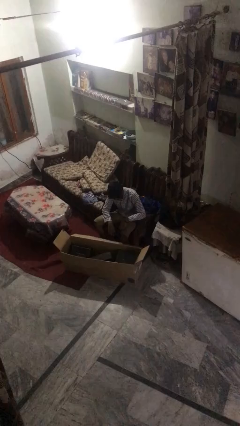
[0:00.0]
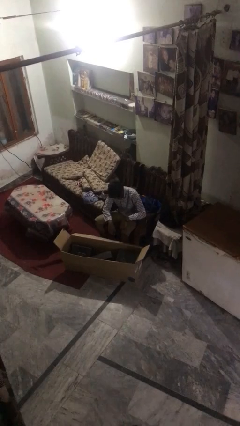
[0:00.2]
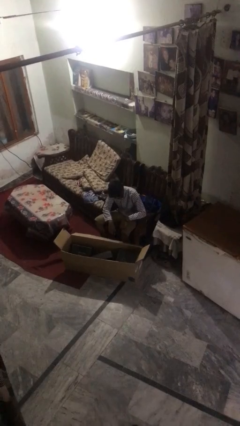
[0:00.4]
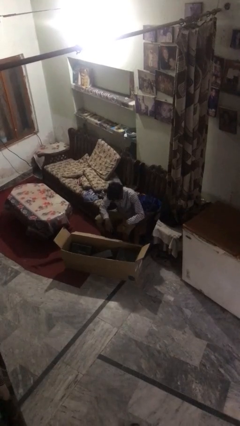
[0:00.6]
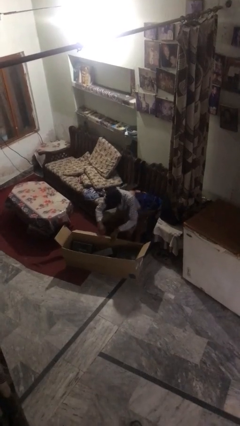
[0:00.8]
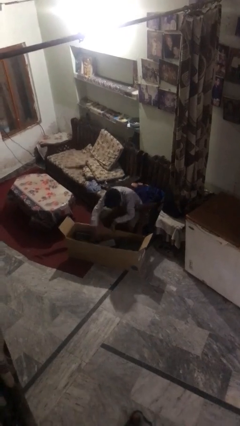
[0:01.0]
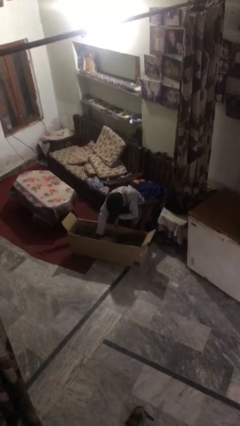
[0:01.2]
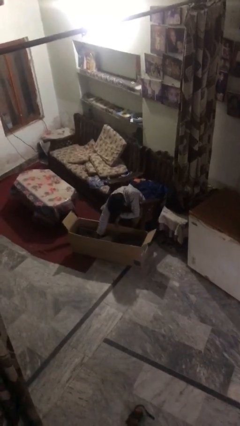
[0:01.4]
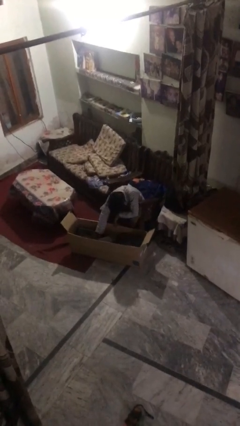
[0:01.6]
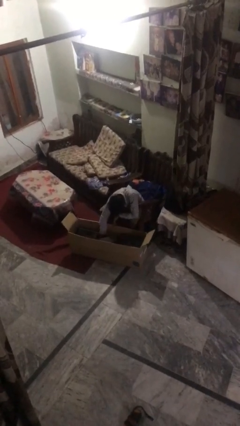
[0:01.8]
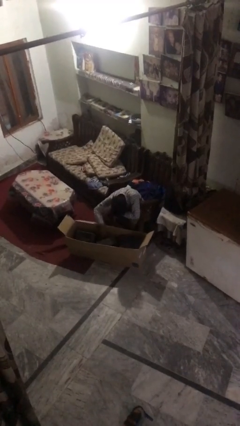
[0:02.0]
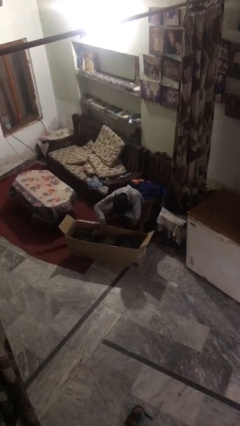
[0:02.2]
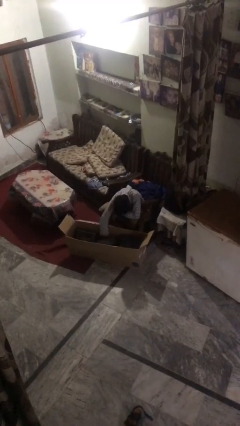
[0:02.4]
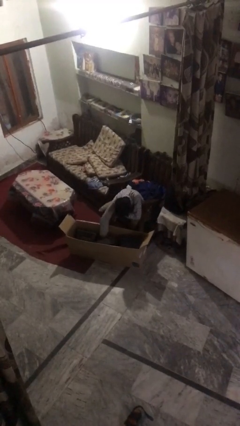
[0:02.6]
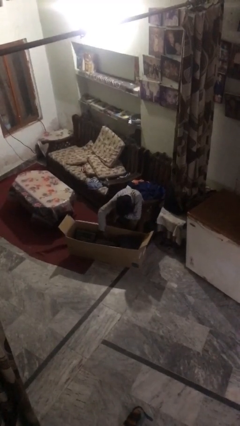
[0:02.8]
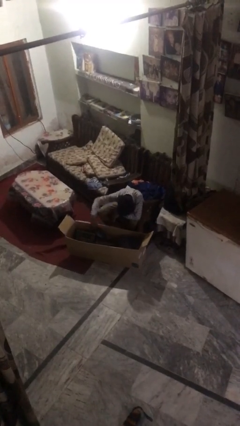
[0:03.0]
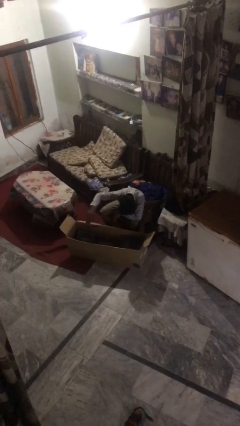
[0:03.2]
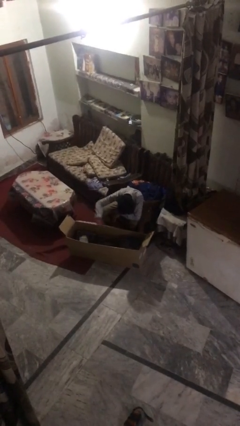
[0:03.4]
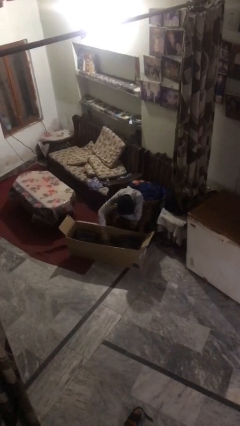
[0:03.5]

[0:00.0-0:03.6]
person searches in box

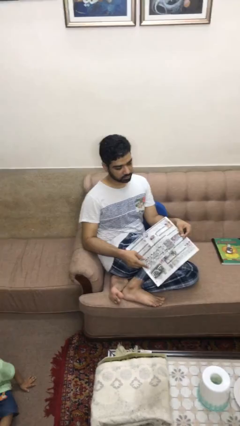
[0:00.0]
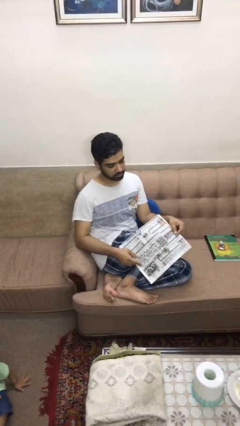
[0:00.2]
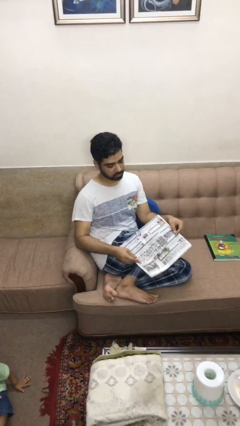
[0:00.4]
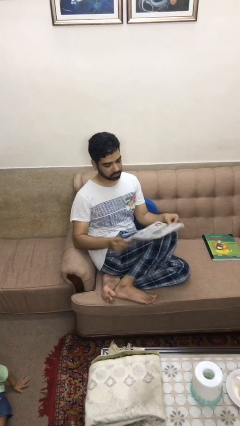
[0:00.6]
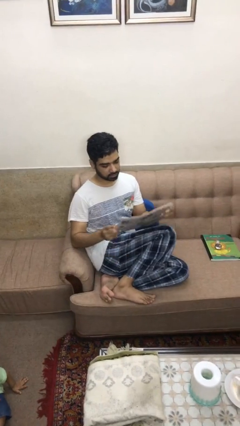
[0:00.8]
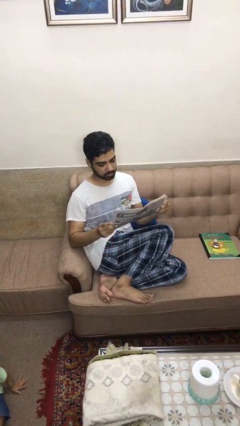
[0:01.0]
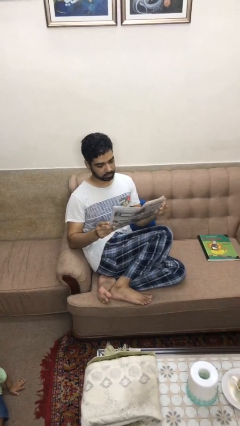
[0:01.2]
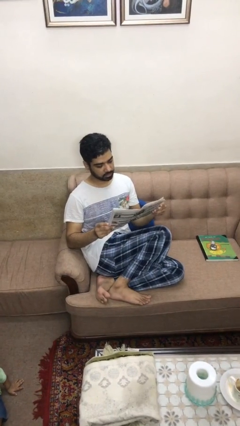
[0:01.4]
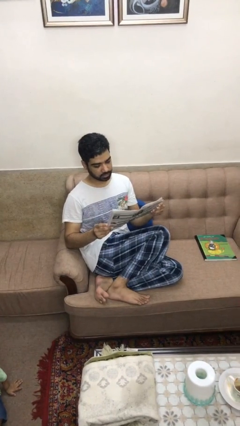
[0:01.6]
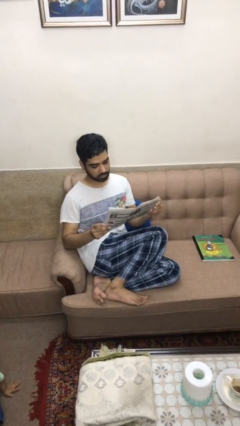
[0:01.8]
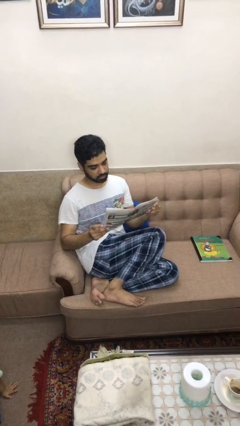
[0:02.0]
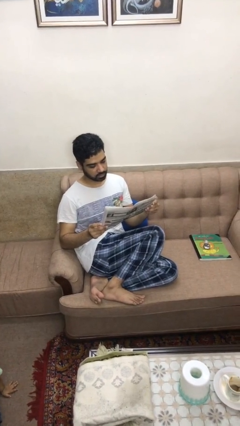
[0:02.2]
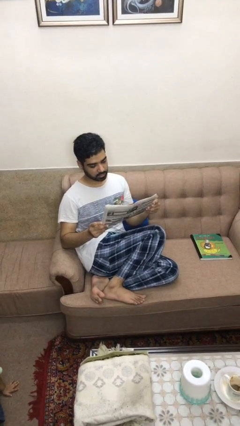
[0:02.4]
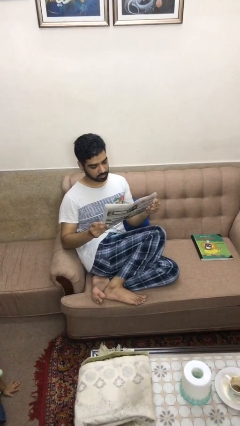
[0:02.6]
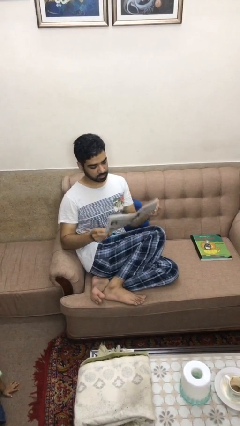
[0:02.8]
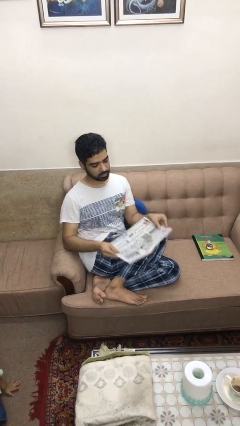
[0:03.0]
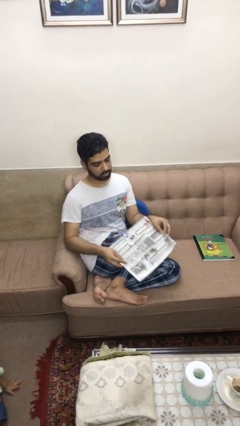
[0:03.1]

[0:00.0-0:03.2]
person reads newspaper

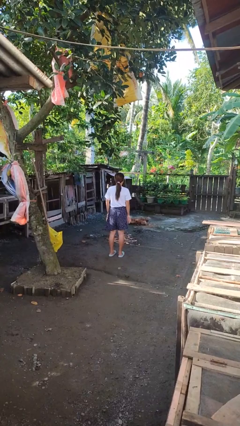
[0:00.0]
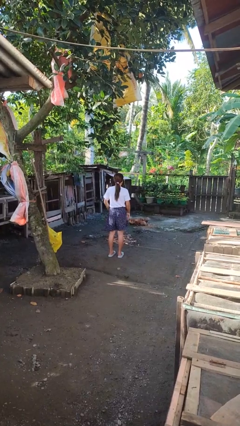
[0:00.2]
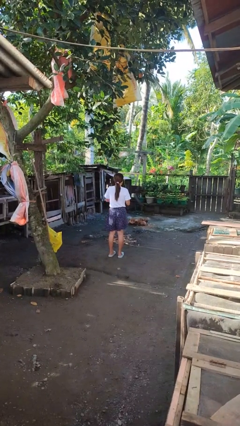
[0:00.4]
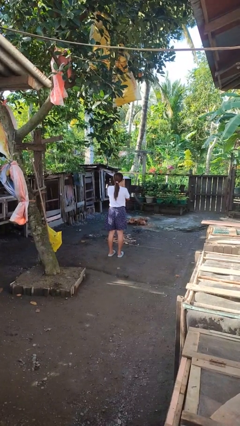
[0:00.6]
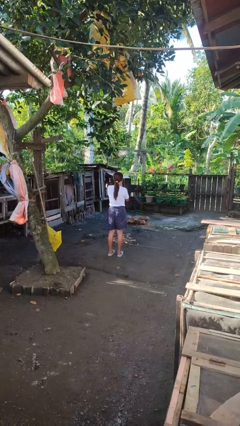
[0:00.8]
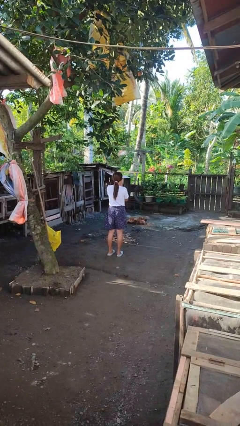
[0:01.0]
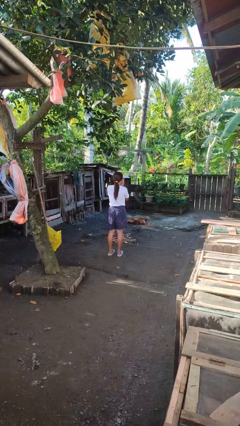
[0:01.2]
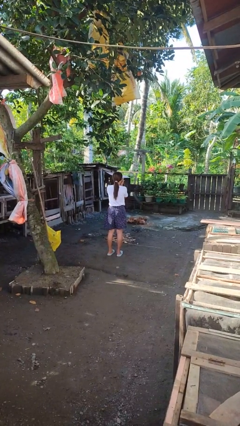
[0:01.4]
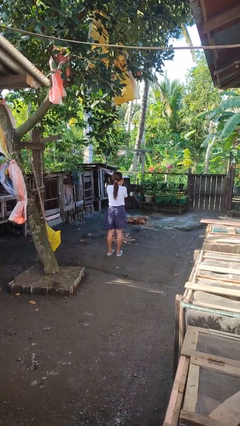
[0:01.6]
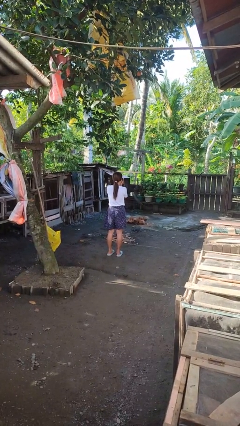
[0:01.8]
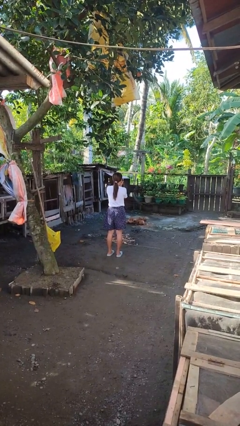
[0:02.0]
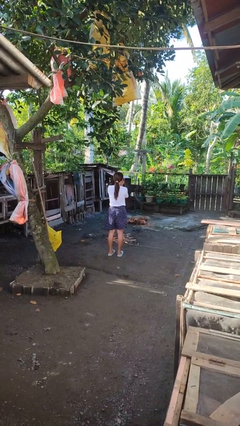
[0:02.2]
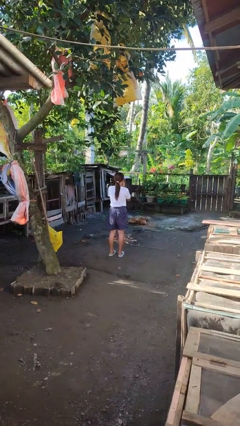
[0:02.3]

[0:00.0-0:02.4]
person blows into hands

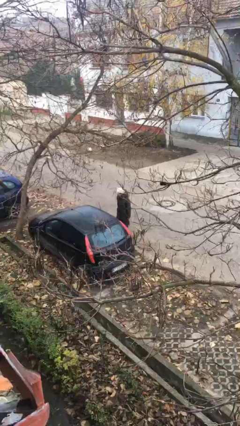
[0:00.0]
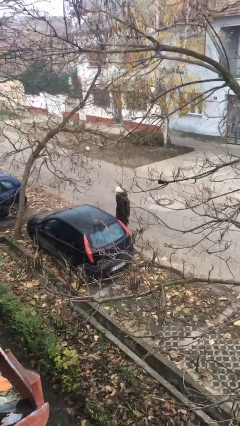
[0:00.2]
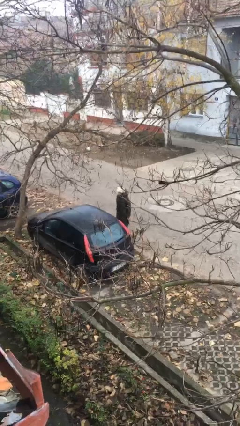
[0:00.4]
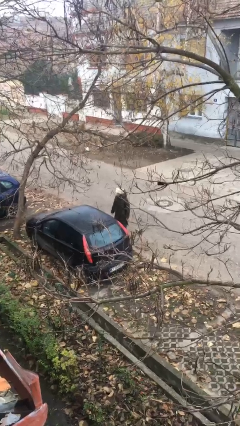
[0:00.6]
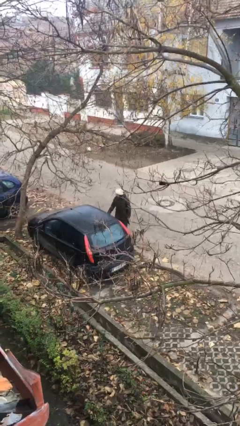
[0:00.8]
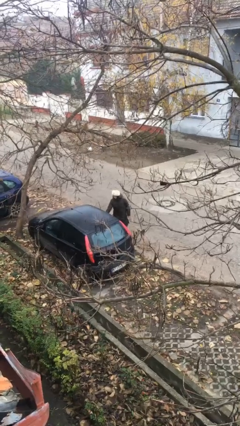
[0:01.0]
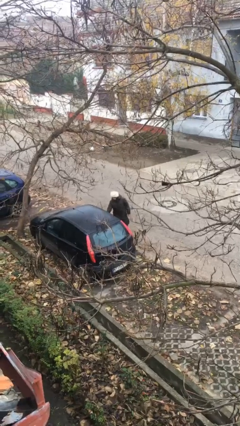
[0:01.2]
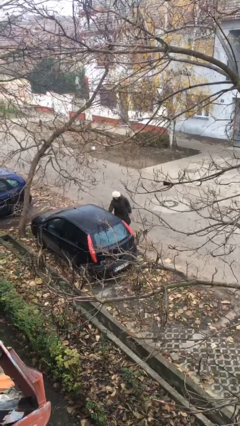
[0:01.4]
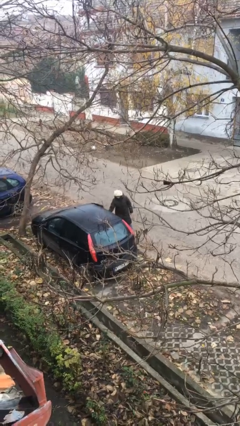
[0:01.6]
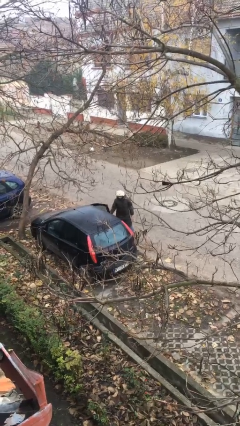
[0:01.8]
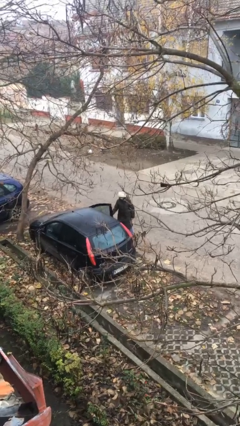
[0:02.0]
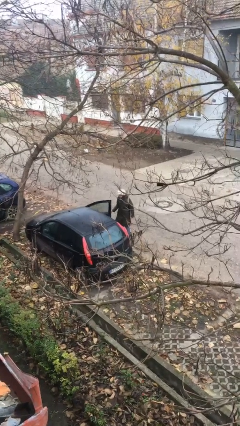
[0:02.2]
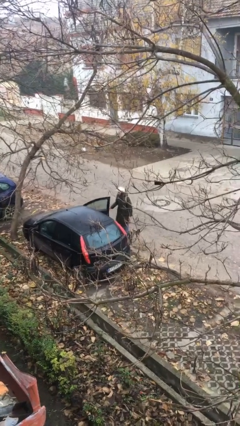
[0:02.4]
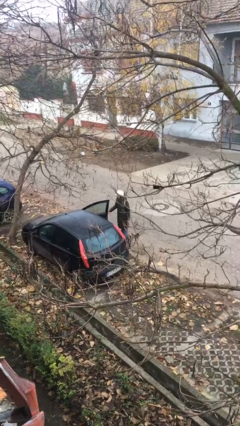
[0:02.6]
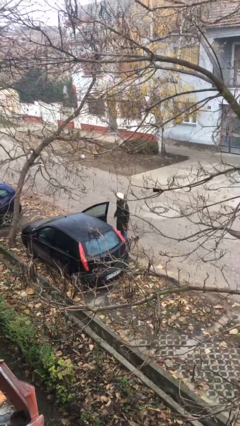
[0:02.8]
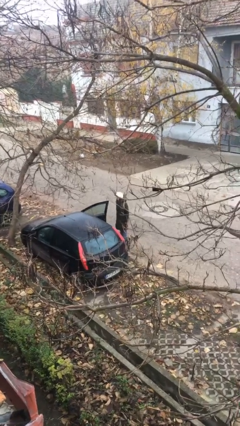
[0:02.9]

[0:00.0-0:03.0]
person opens car door

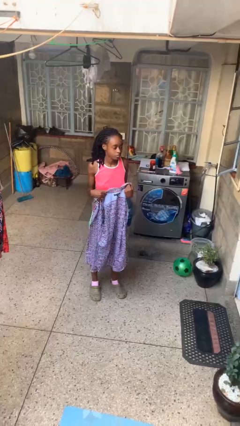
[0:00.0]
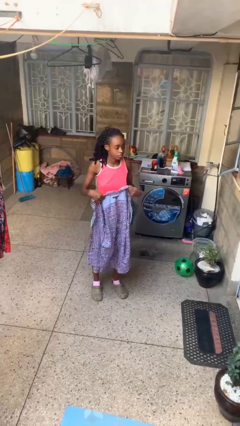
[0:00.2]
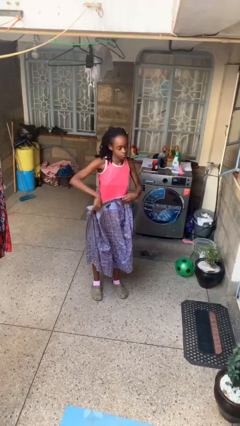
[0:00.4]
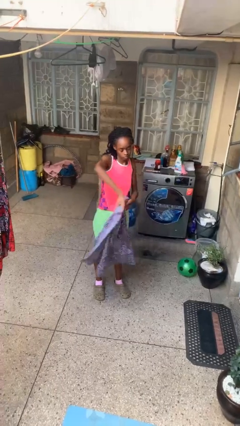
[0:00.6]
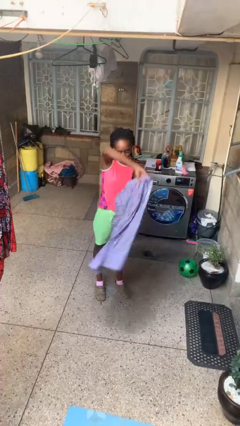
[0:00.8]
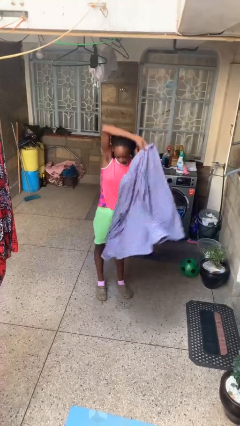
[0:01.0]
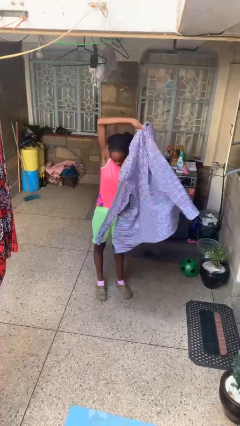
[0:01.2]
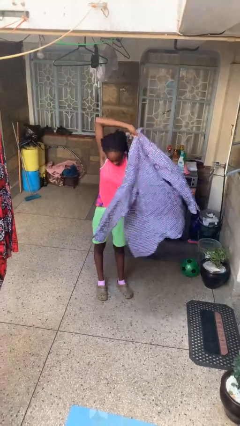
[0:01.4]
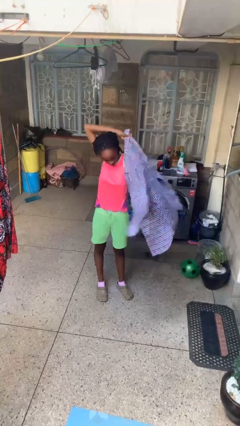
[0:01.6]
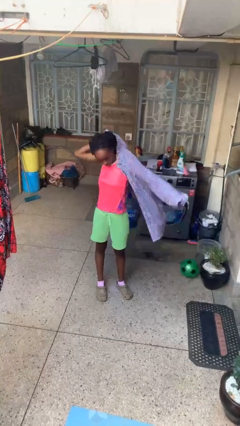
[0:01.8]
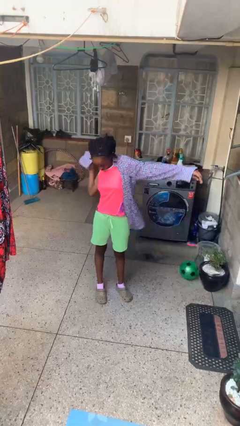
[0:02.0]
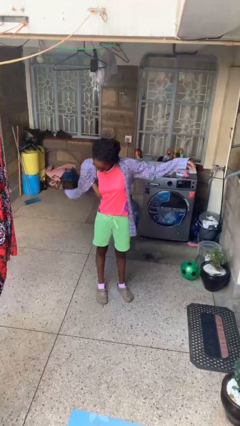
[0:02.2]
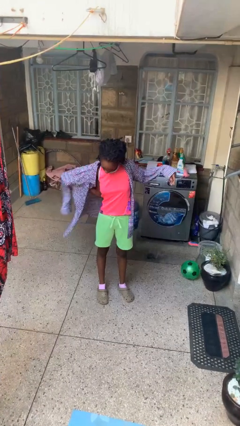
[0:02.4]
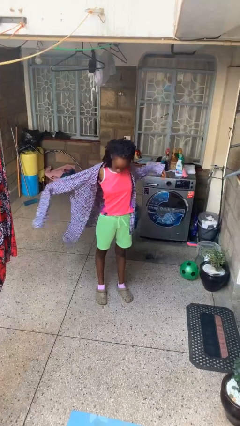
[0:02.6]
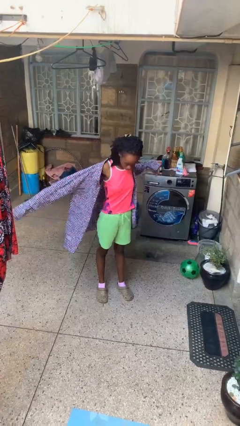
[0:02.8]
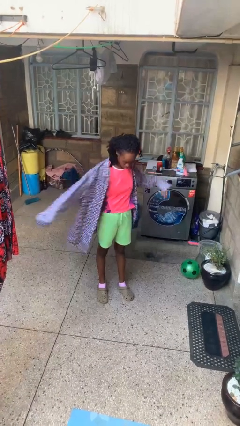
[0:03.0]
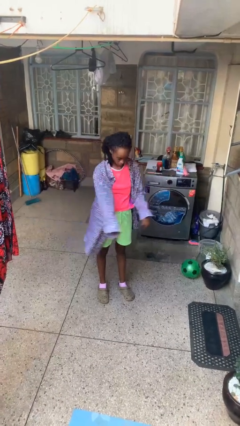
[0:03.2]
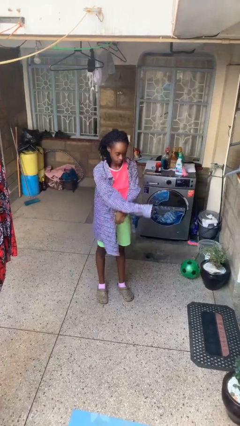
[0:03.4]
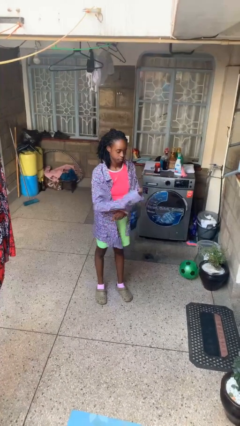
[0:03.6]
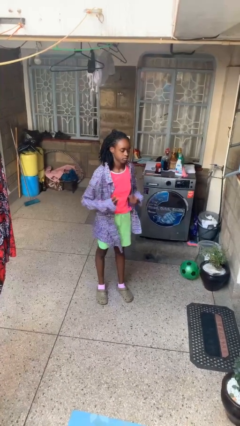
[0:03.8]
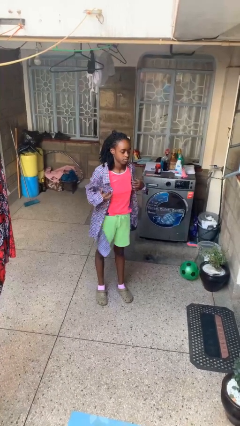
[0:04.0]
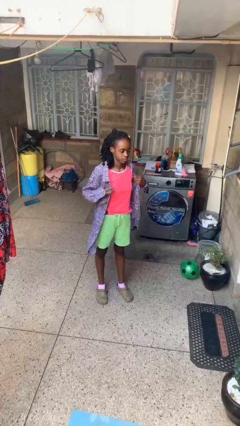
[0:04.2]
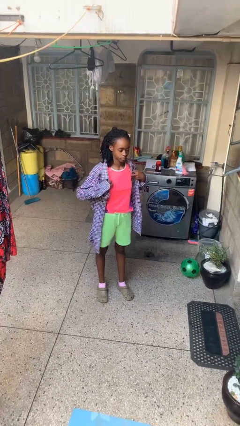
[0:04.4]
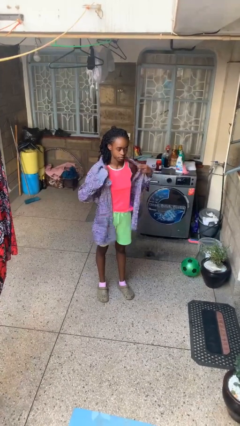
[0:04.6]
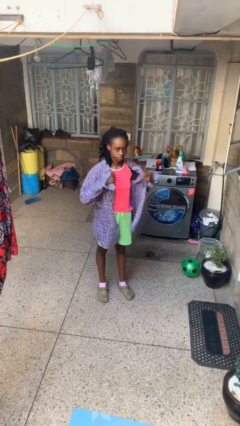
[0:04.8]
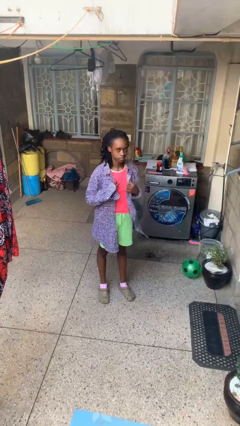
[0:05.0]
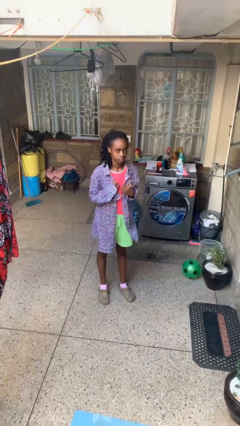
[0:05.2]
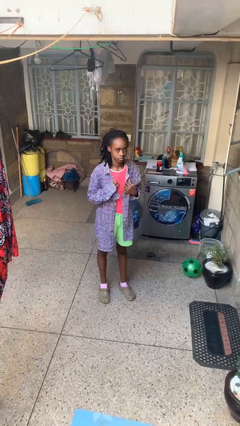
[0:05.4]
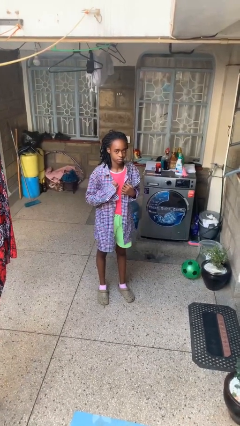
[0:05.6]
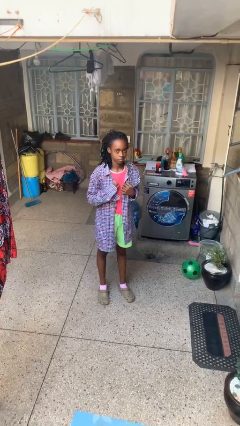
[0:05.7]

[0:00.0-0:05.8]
person puts on shirt
